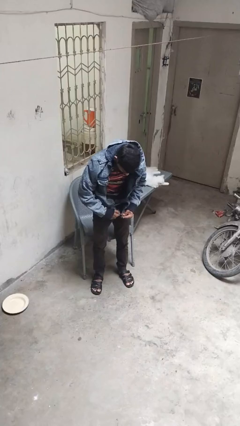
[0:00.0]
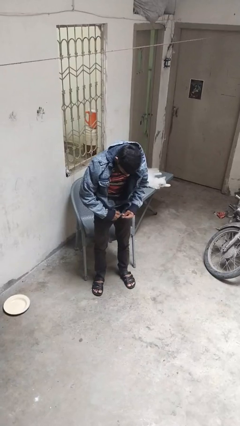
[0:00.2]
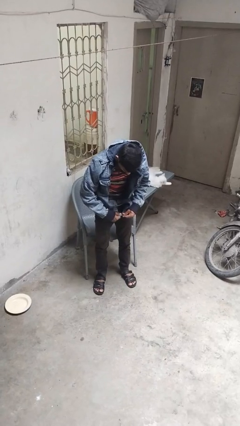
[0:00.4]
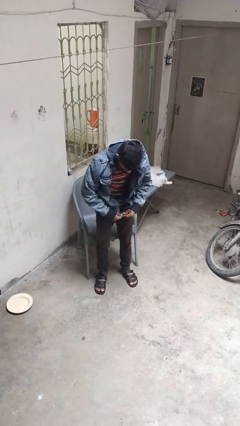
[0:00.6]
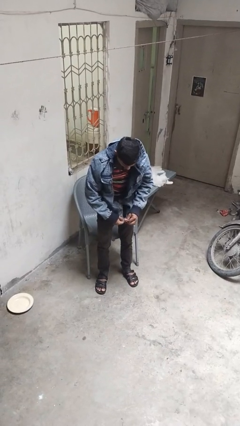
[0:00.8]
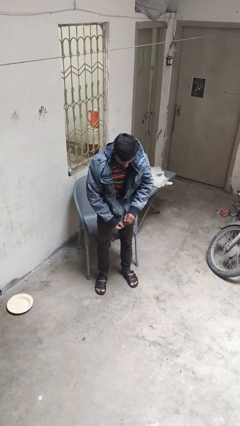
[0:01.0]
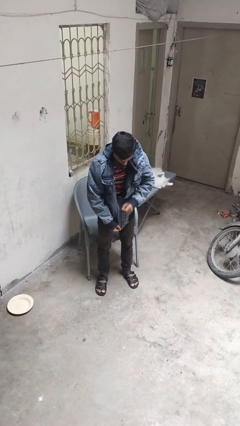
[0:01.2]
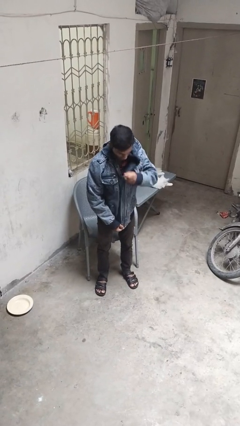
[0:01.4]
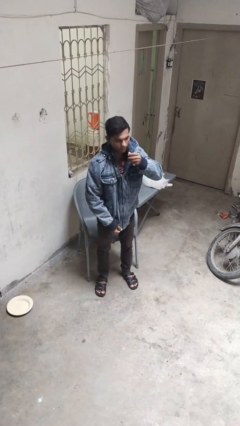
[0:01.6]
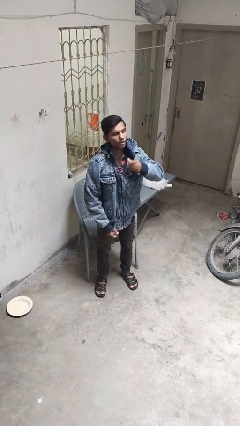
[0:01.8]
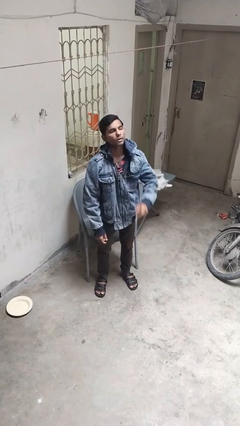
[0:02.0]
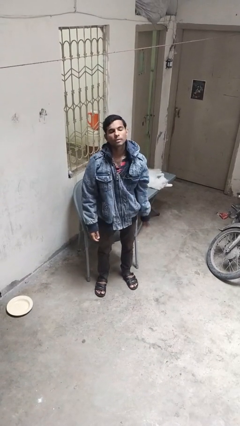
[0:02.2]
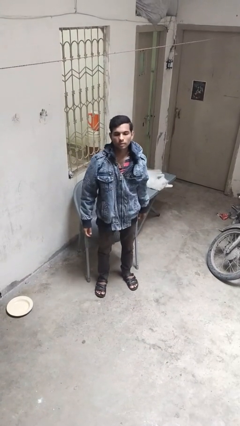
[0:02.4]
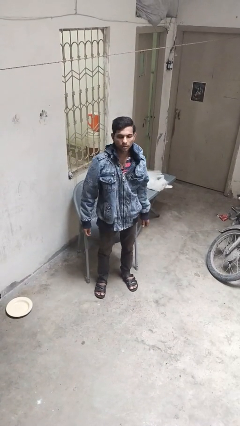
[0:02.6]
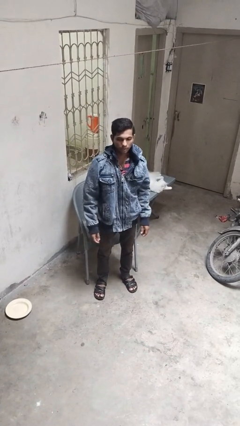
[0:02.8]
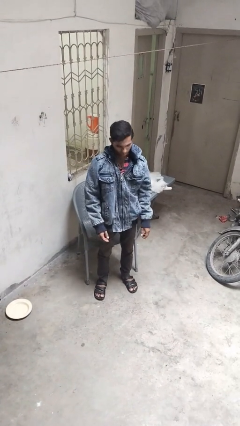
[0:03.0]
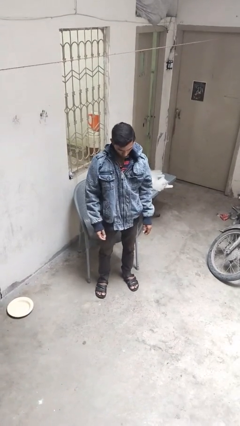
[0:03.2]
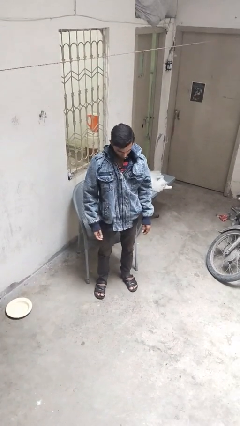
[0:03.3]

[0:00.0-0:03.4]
person zips up jacket

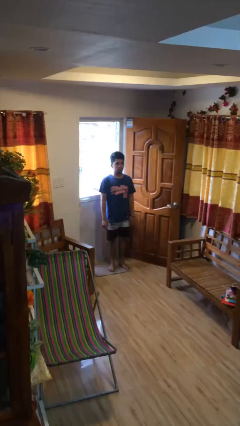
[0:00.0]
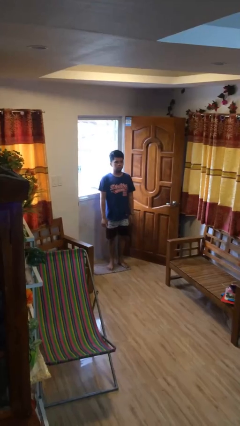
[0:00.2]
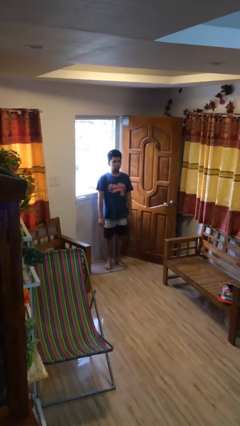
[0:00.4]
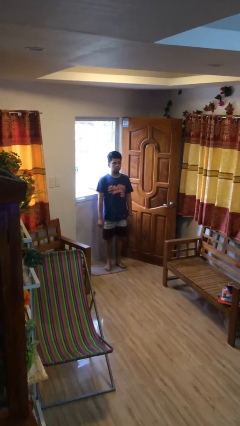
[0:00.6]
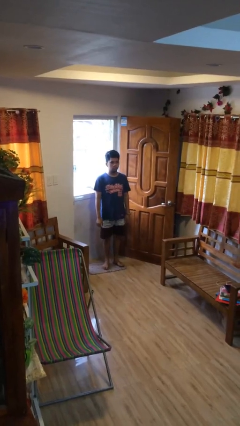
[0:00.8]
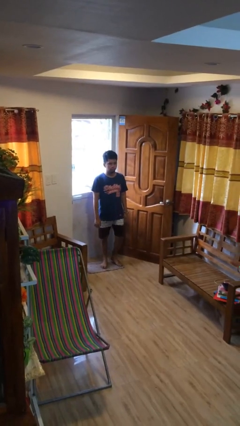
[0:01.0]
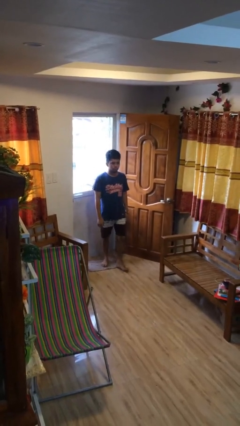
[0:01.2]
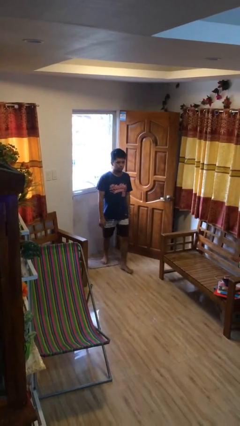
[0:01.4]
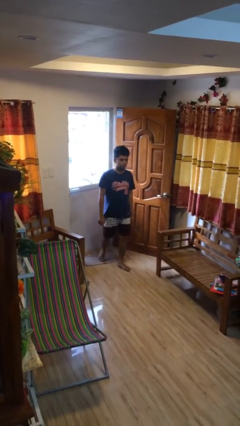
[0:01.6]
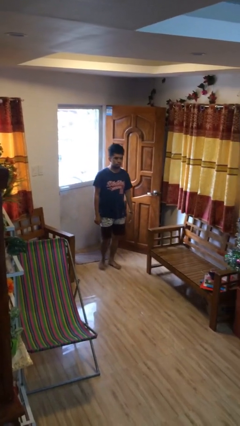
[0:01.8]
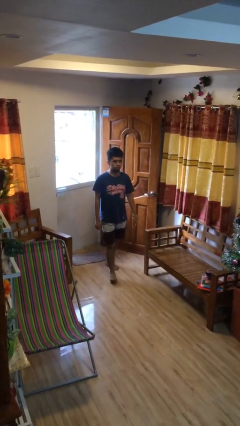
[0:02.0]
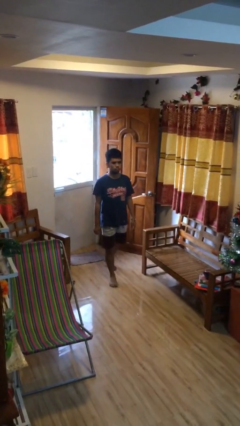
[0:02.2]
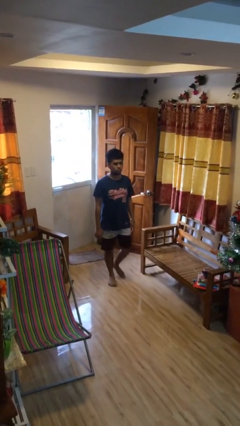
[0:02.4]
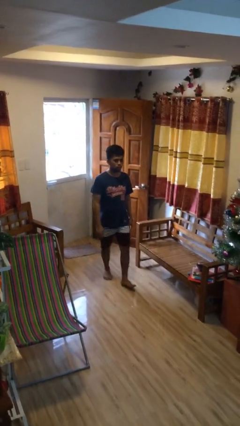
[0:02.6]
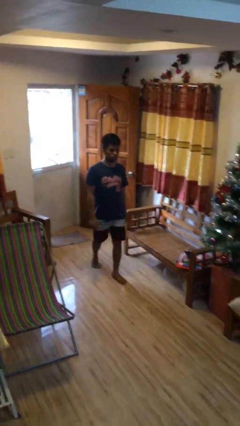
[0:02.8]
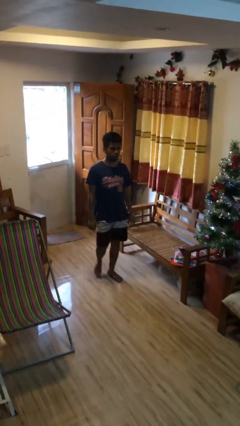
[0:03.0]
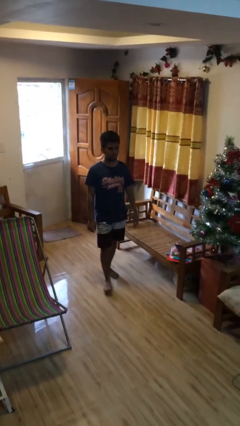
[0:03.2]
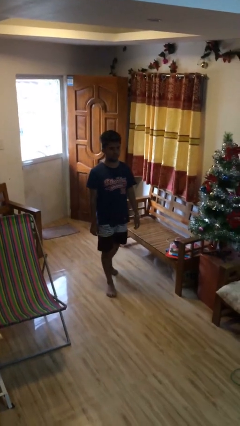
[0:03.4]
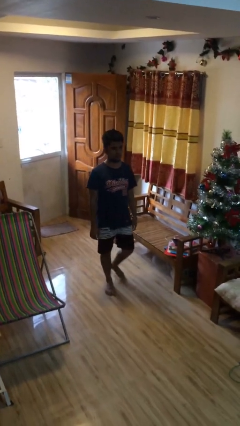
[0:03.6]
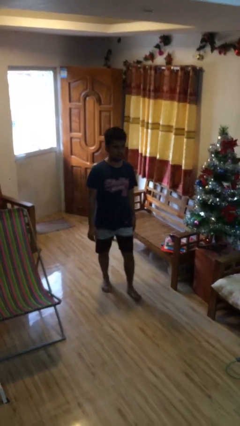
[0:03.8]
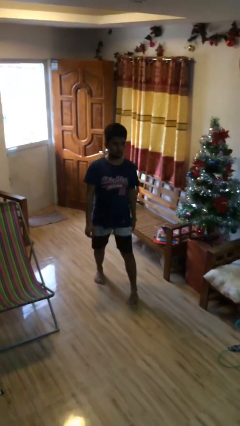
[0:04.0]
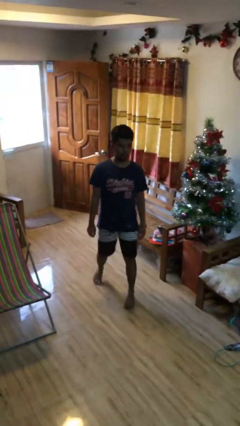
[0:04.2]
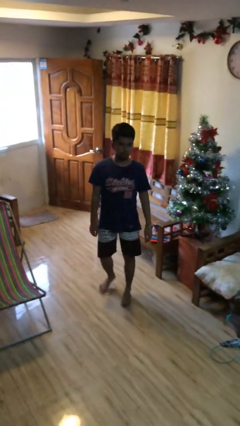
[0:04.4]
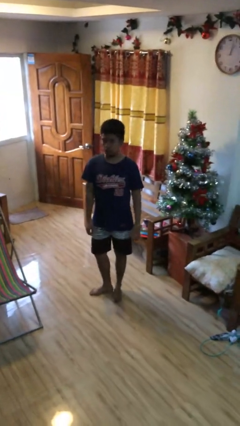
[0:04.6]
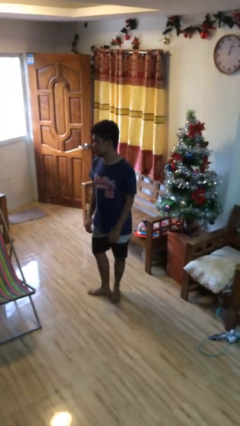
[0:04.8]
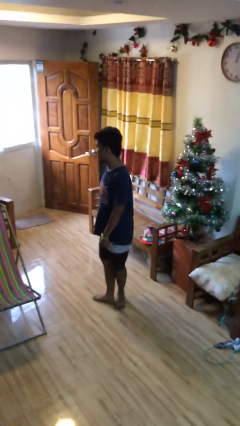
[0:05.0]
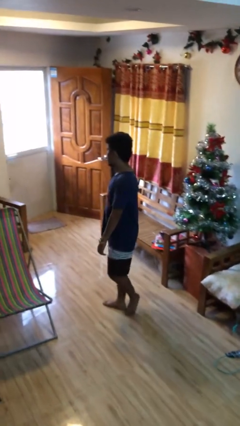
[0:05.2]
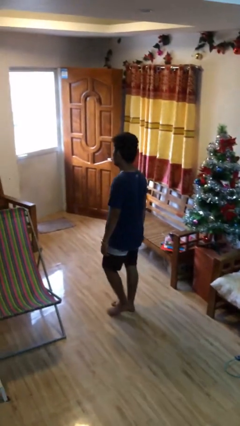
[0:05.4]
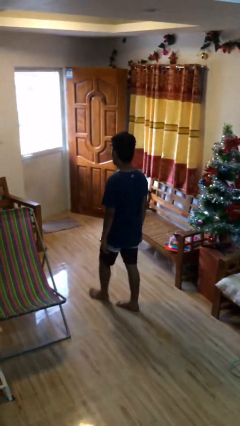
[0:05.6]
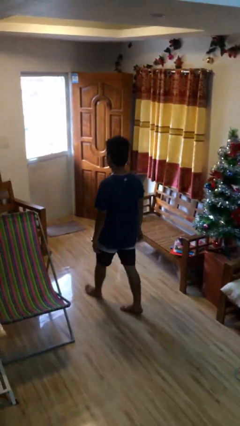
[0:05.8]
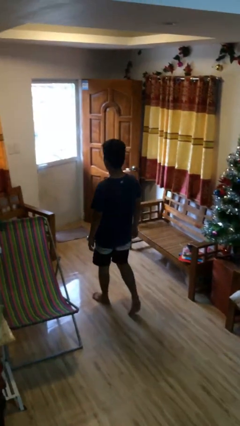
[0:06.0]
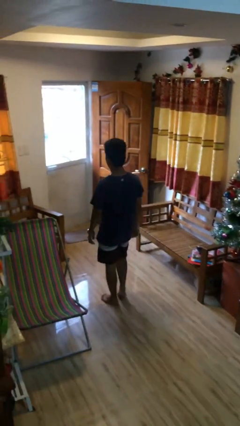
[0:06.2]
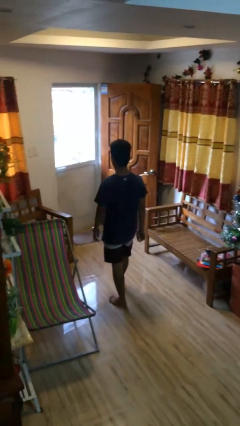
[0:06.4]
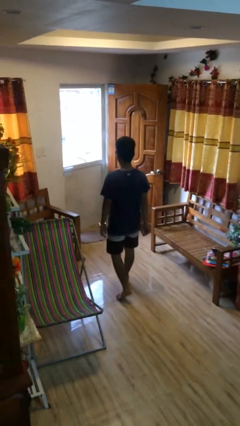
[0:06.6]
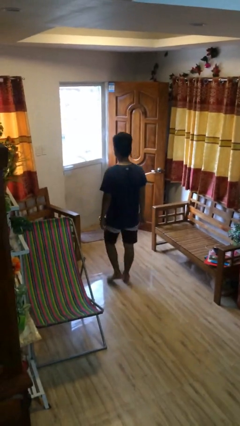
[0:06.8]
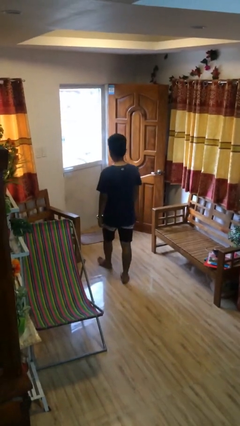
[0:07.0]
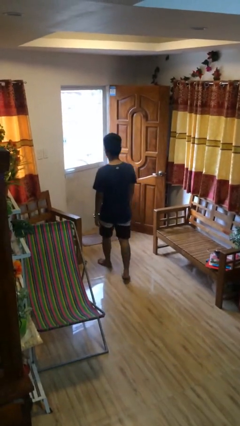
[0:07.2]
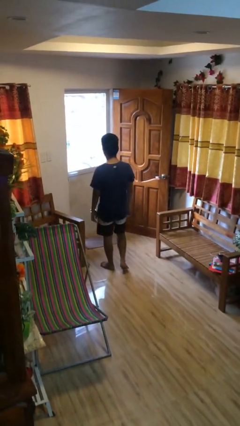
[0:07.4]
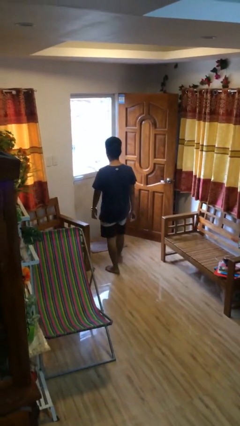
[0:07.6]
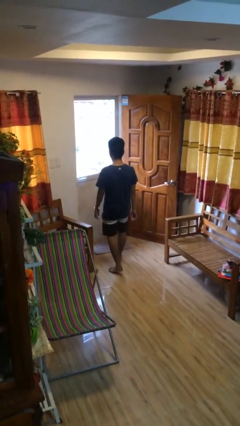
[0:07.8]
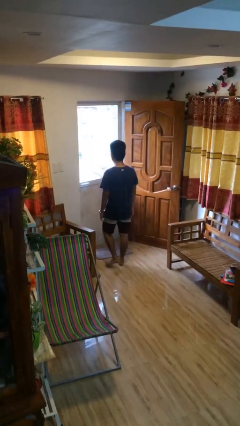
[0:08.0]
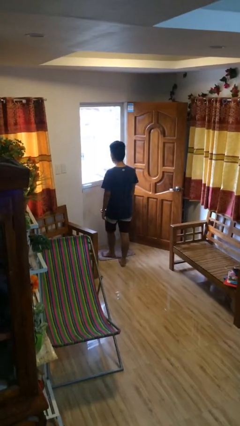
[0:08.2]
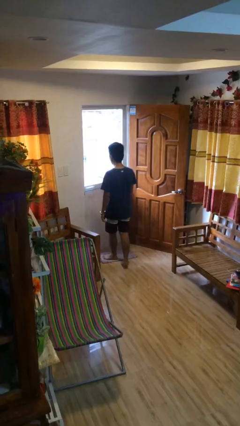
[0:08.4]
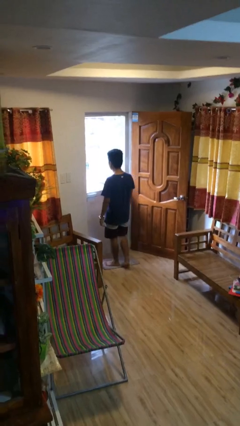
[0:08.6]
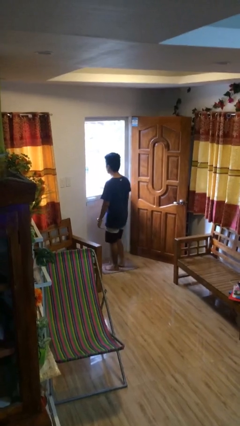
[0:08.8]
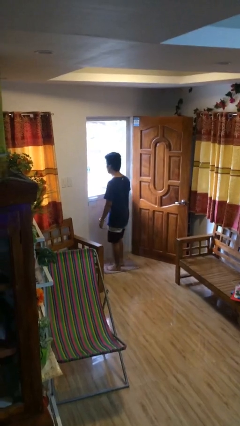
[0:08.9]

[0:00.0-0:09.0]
person walks

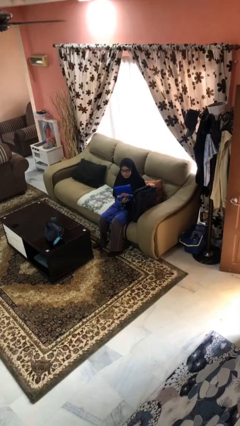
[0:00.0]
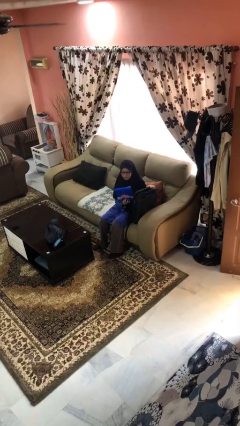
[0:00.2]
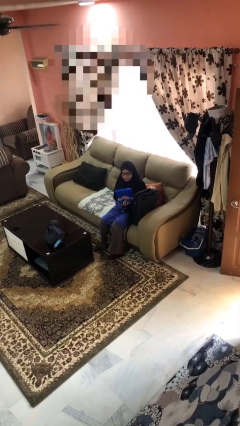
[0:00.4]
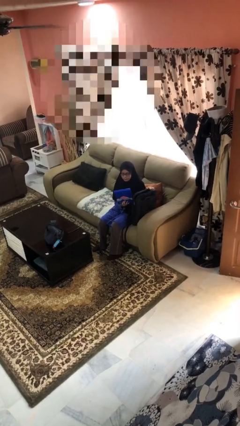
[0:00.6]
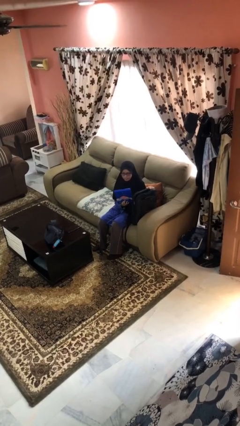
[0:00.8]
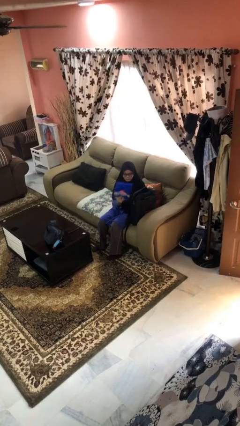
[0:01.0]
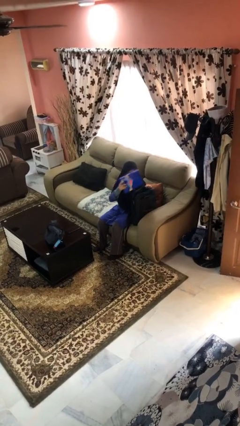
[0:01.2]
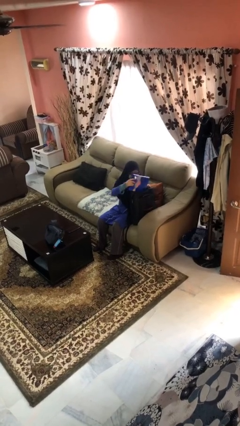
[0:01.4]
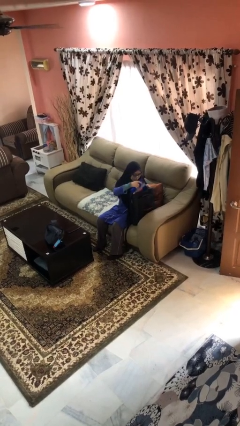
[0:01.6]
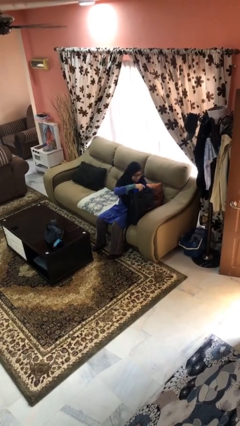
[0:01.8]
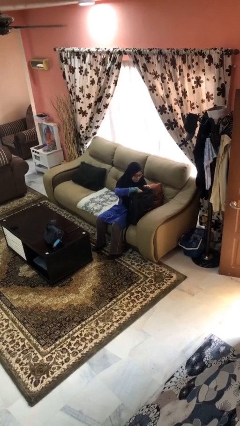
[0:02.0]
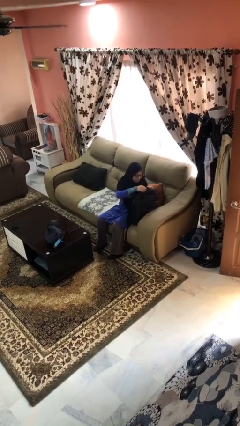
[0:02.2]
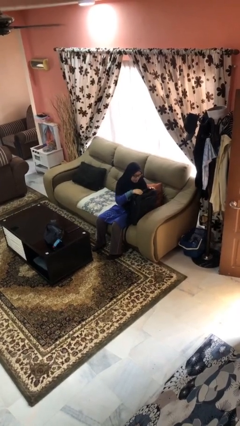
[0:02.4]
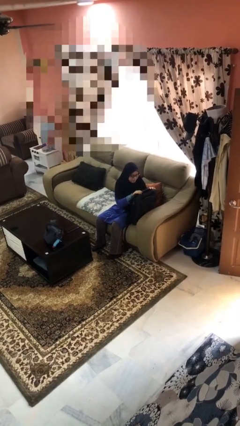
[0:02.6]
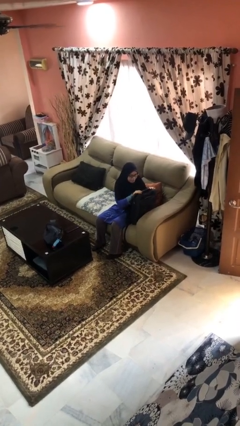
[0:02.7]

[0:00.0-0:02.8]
person puts object into backpack

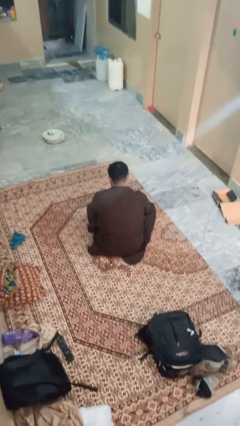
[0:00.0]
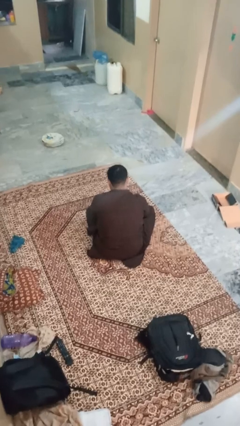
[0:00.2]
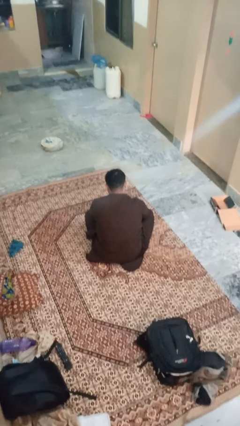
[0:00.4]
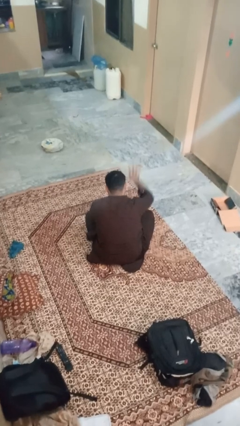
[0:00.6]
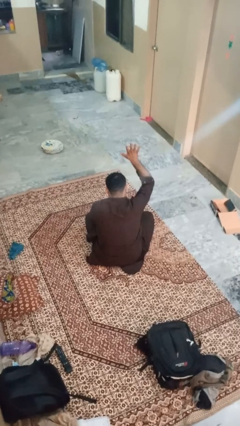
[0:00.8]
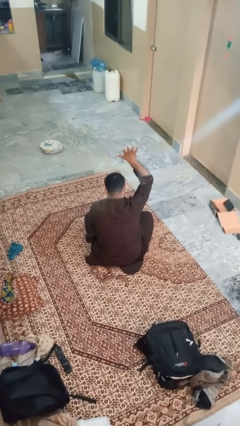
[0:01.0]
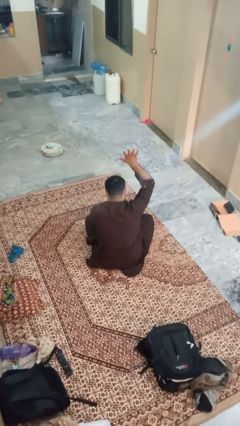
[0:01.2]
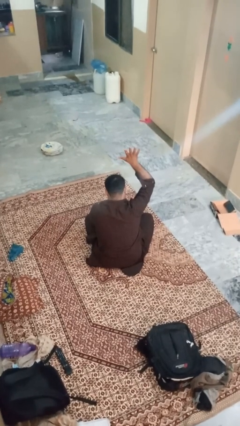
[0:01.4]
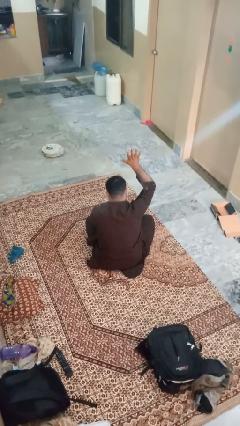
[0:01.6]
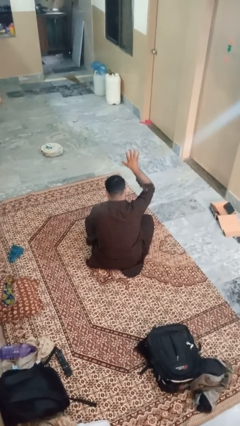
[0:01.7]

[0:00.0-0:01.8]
person gestures number five

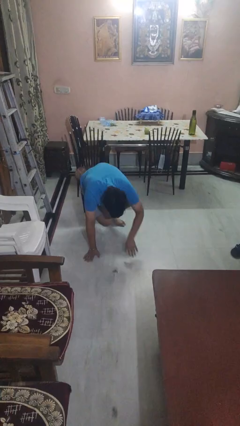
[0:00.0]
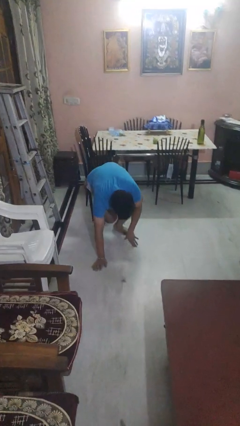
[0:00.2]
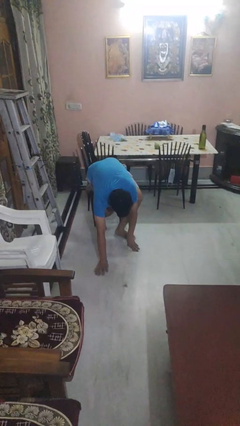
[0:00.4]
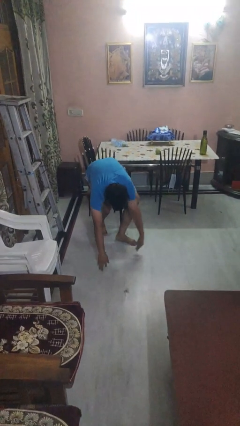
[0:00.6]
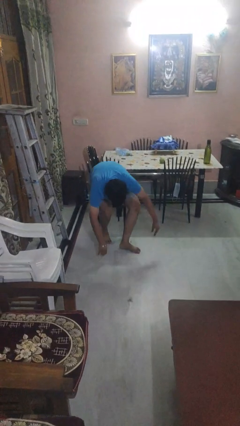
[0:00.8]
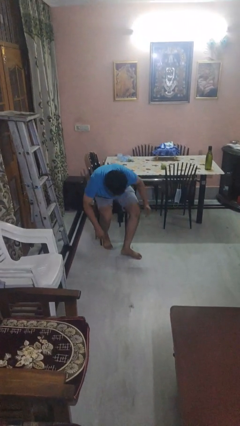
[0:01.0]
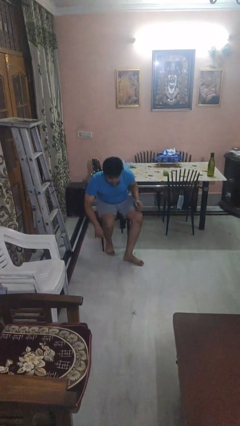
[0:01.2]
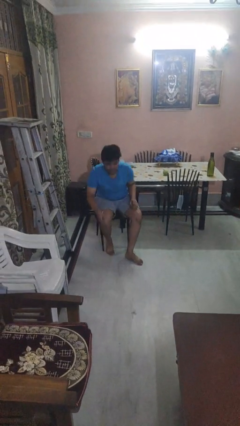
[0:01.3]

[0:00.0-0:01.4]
person stands up from floor
